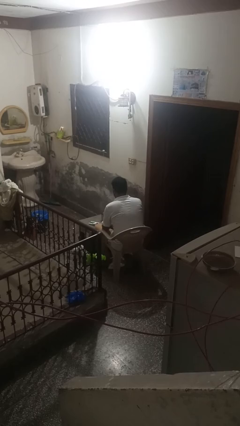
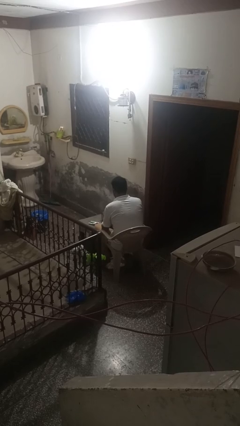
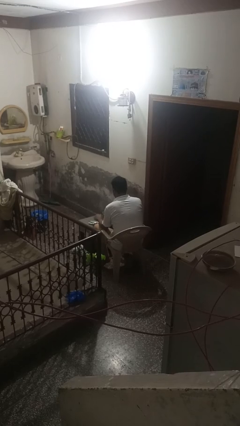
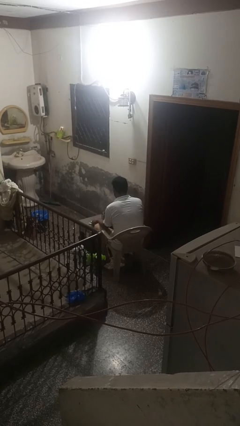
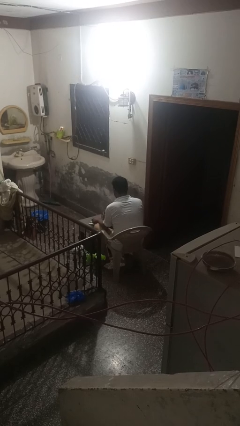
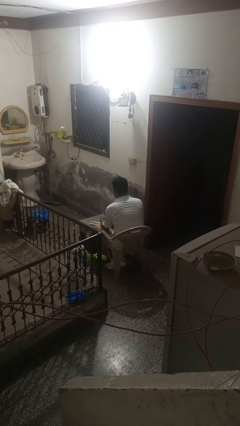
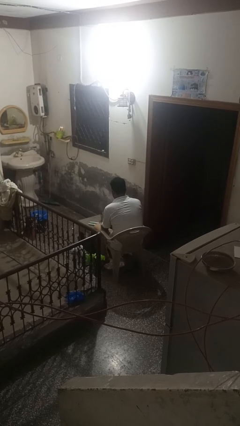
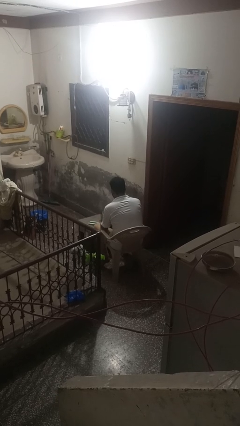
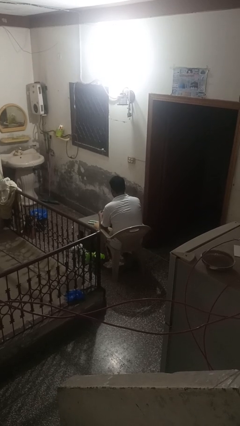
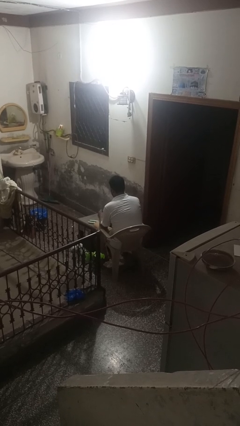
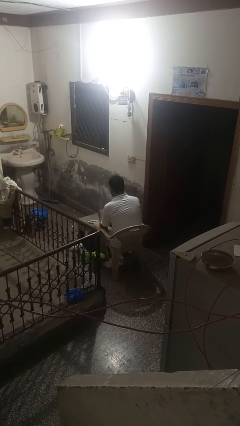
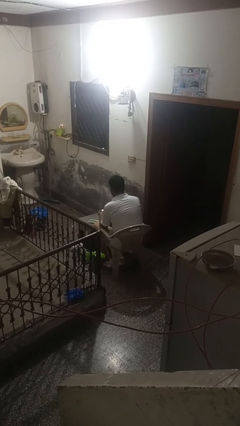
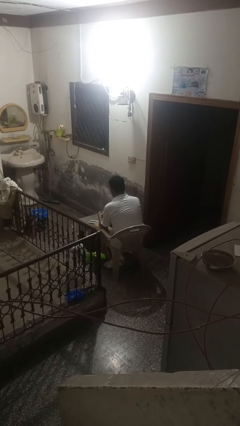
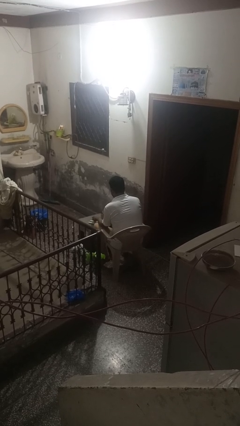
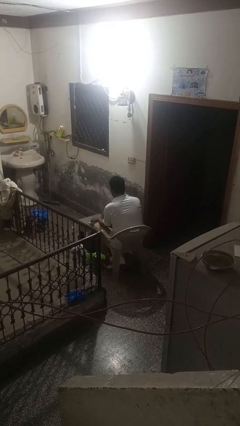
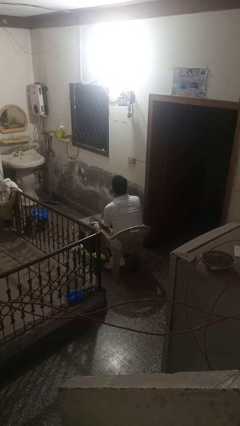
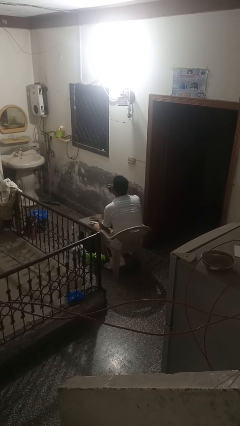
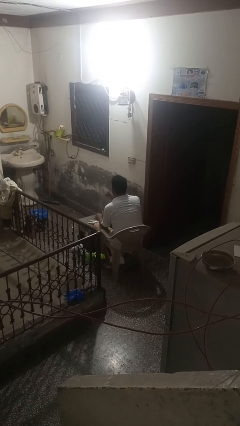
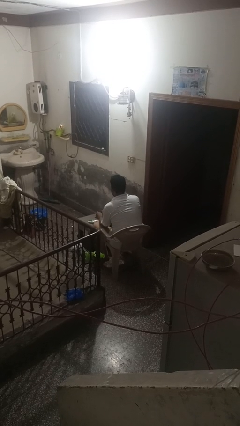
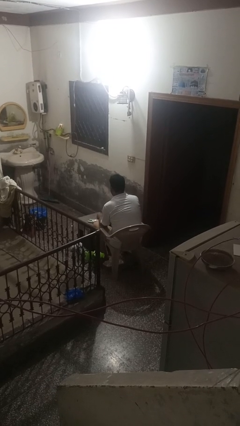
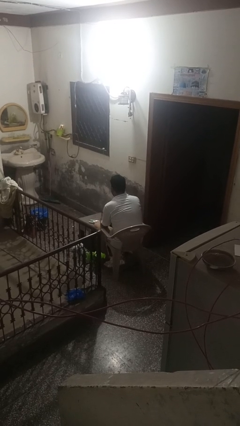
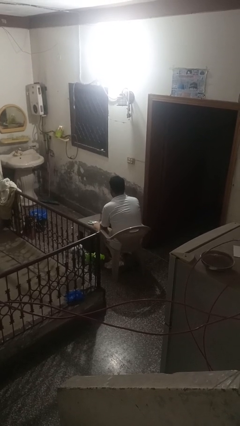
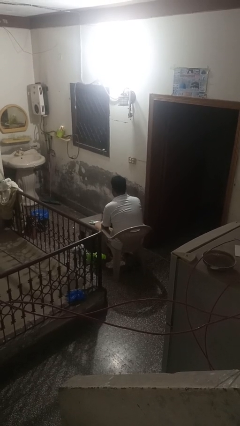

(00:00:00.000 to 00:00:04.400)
person takes medicine pills

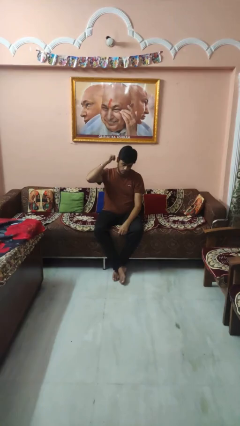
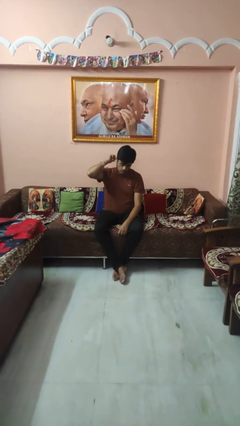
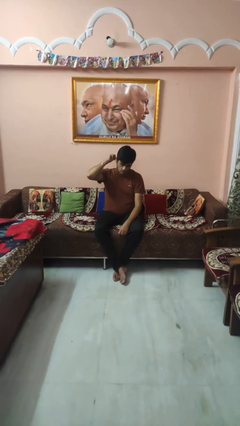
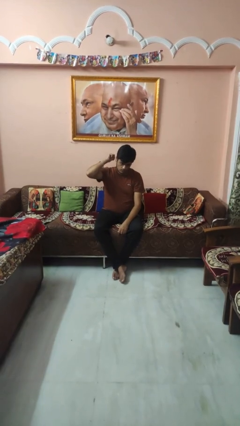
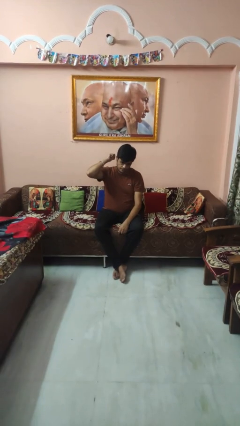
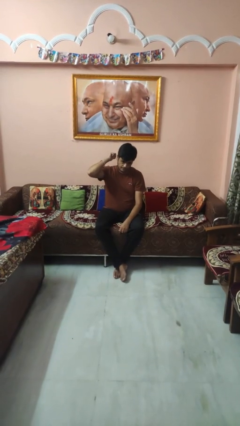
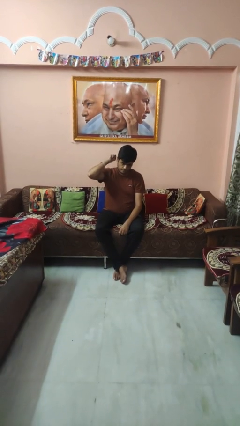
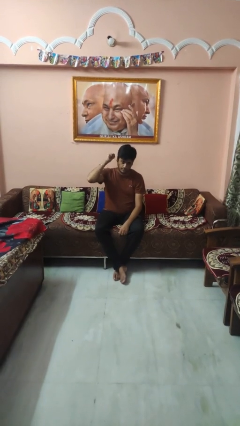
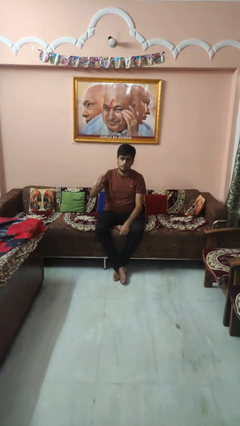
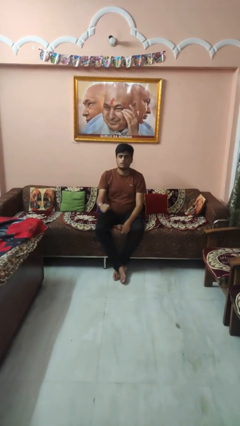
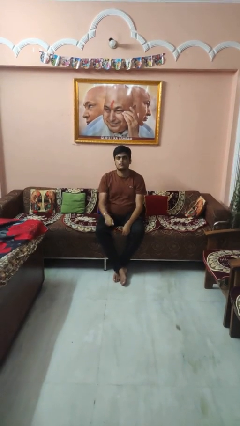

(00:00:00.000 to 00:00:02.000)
person gestures behind me

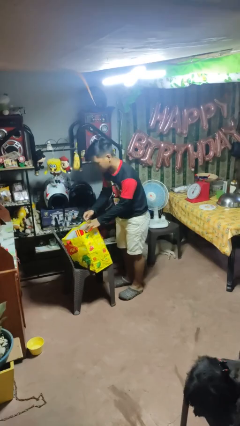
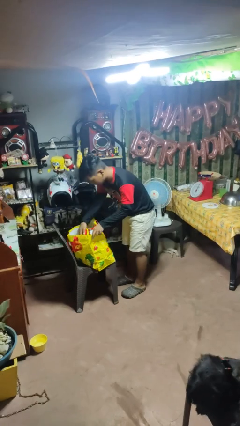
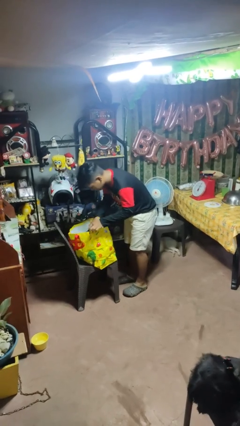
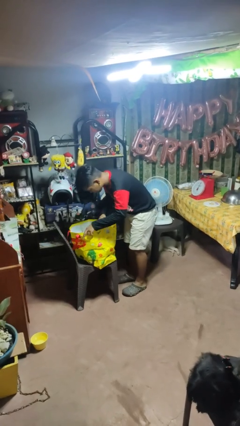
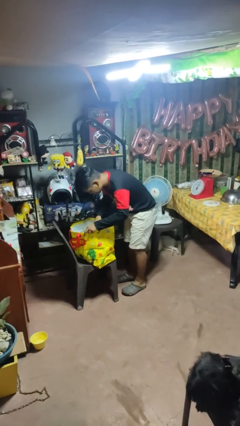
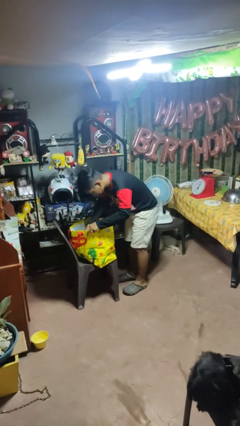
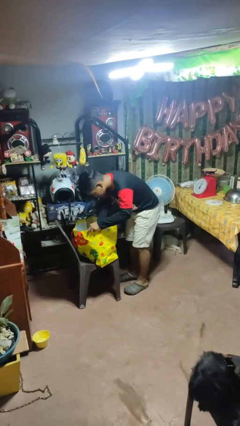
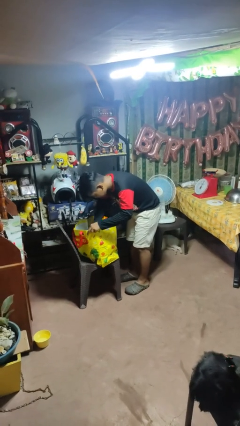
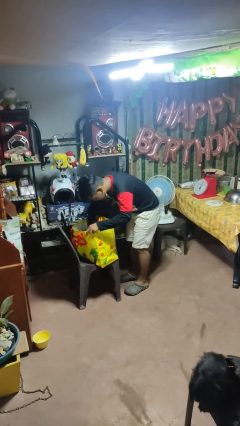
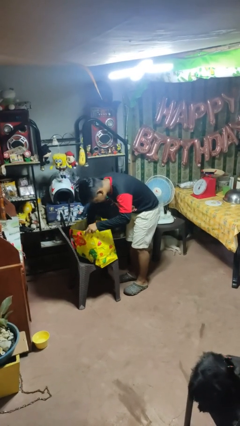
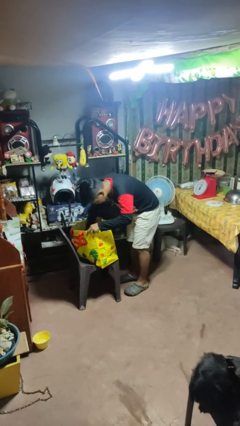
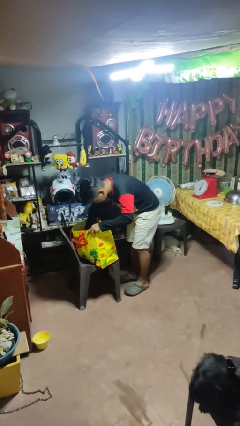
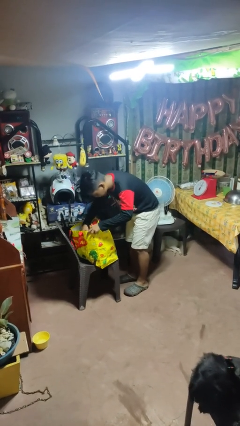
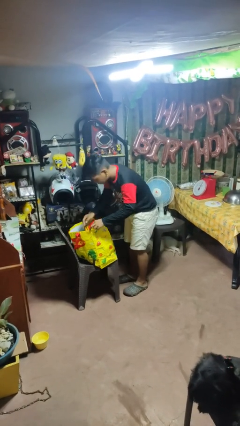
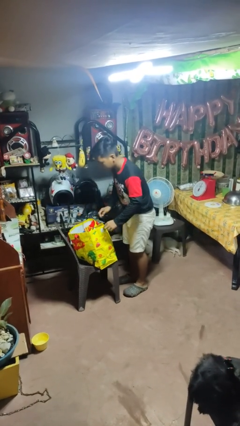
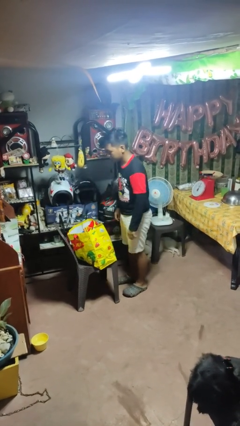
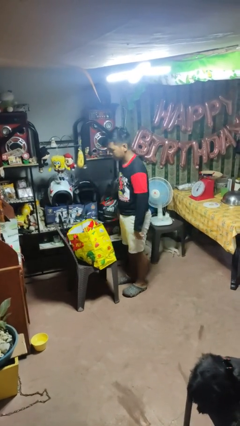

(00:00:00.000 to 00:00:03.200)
person searches in bag

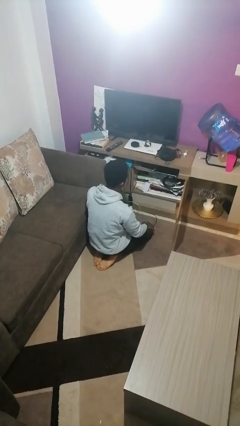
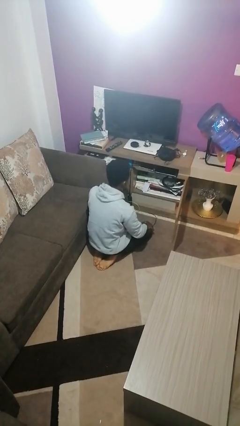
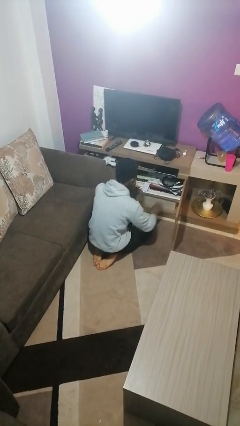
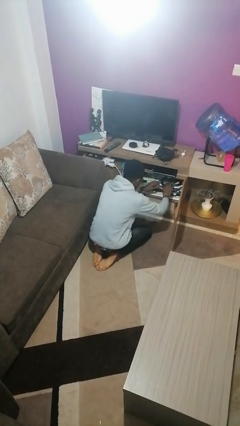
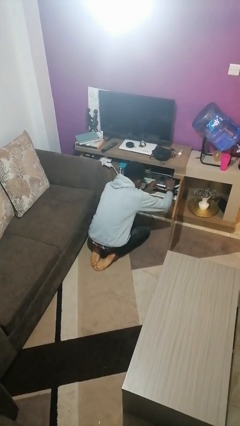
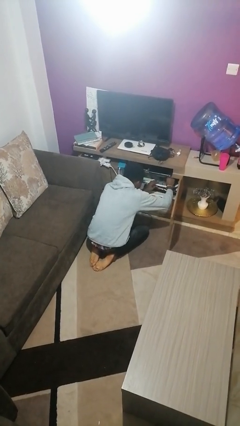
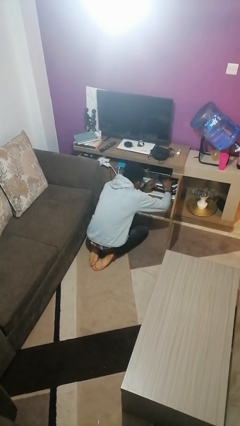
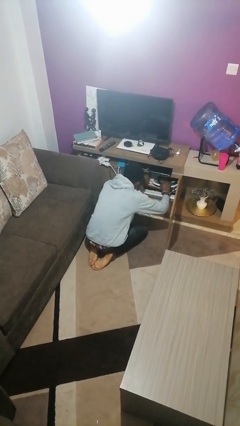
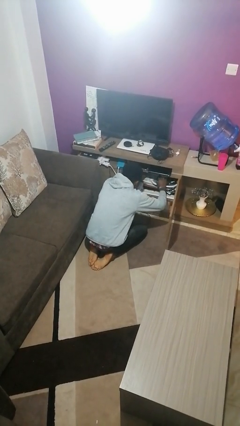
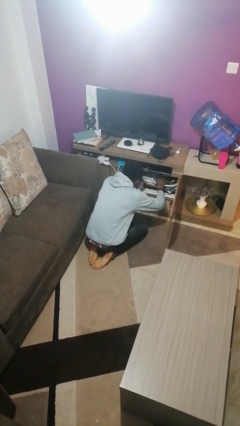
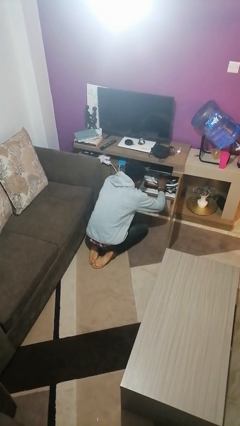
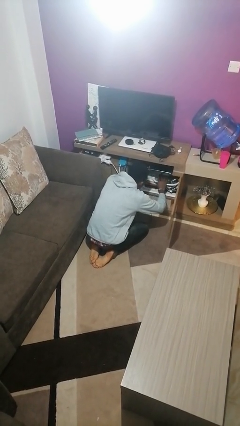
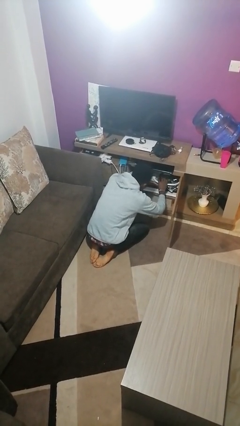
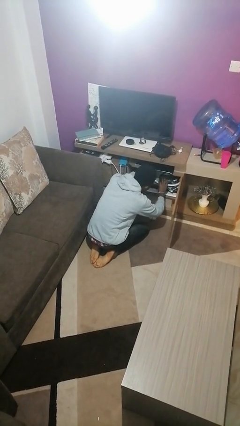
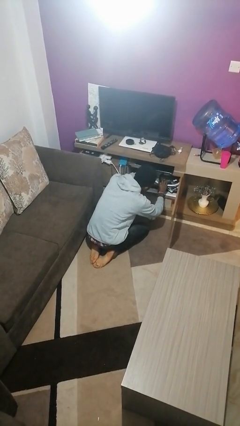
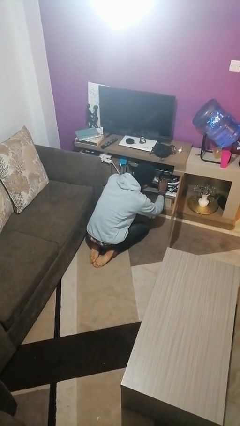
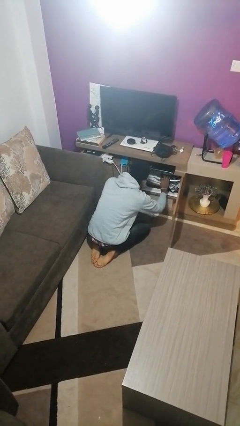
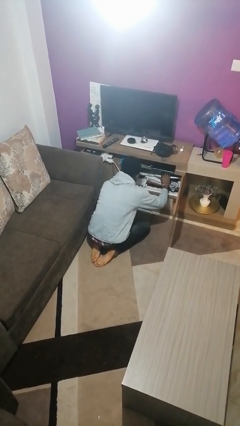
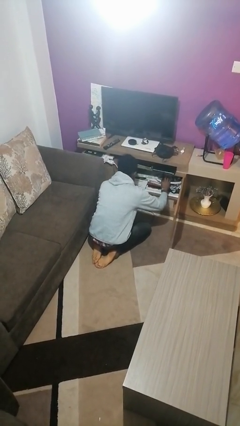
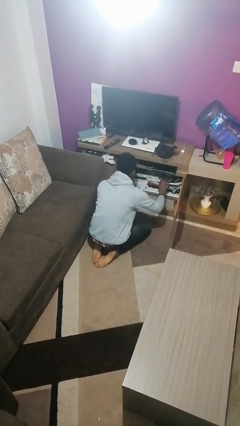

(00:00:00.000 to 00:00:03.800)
person searches in cabinet

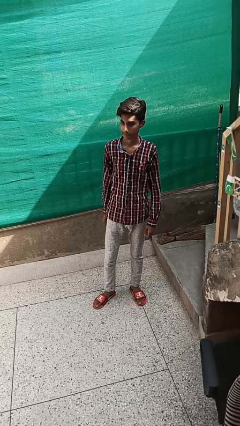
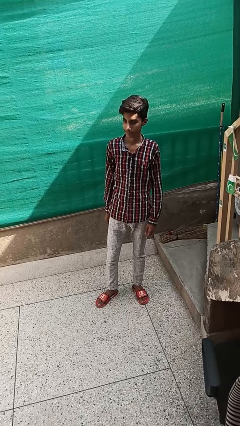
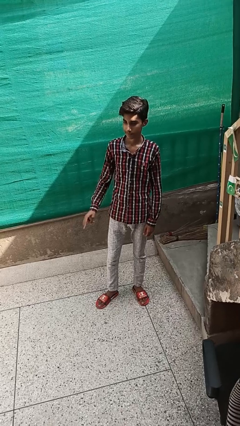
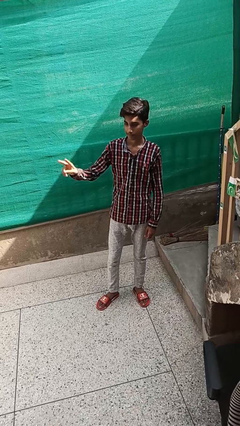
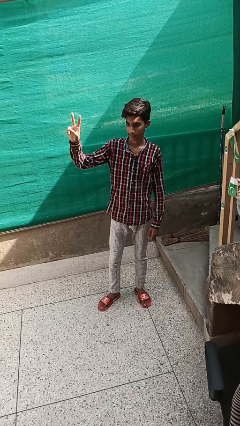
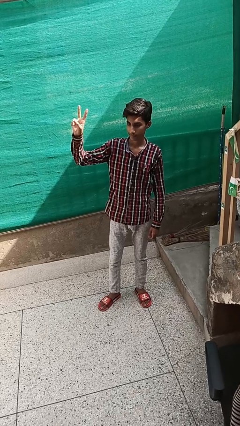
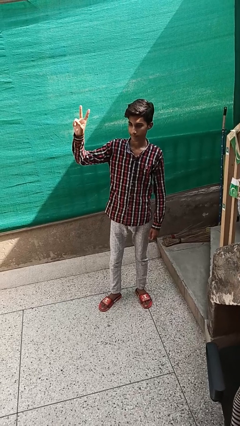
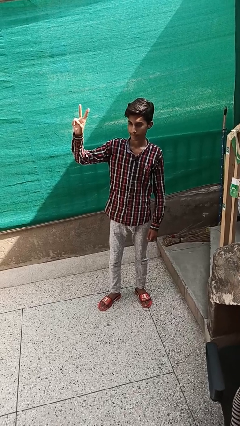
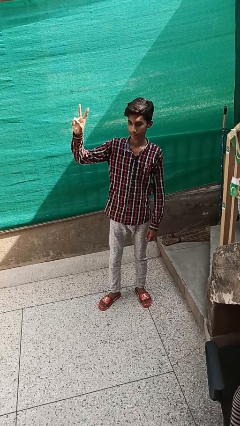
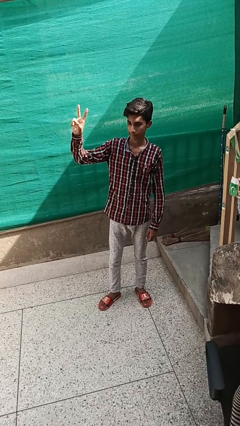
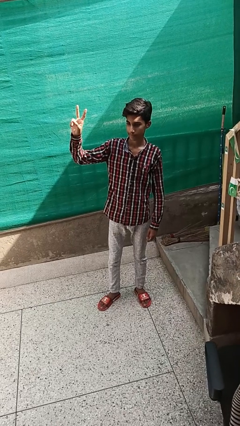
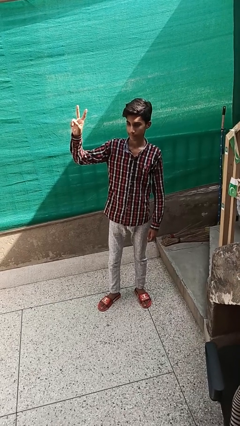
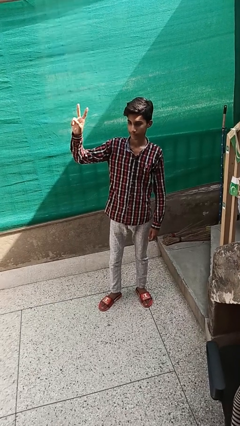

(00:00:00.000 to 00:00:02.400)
person gestures peace

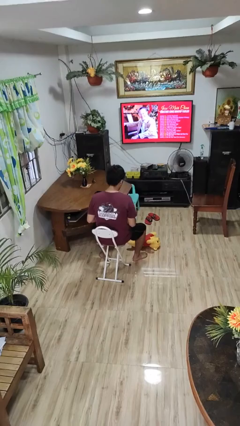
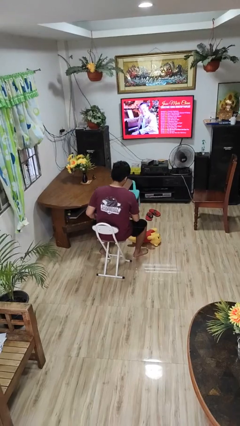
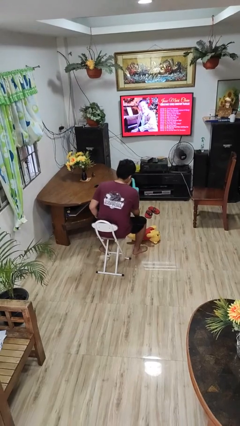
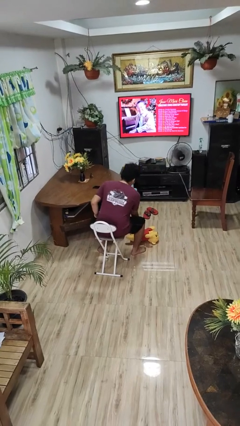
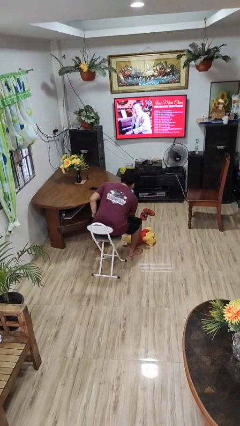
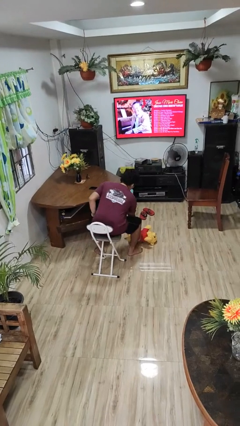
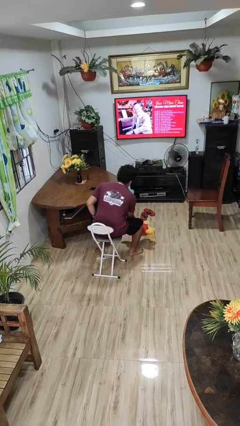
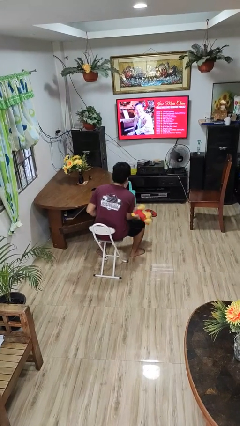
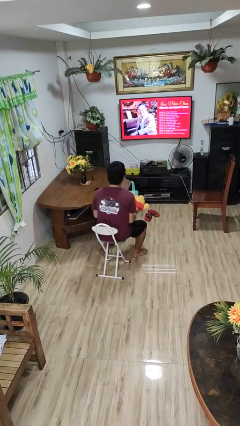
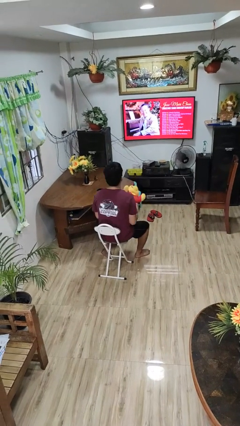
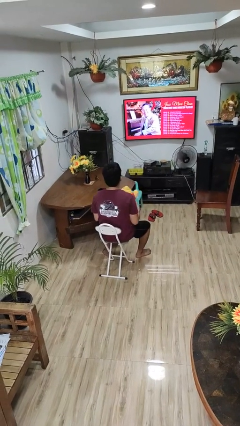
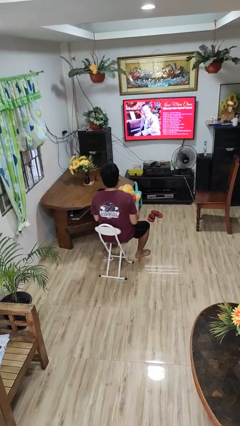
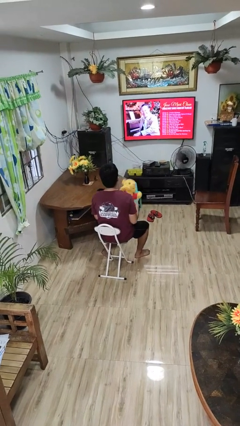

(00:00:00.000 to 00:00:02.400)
person picks up object from floor
